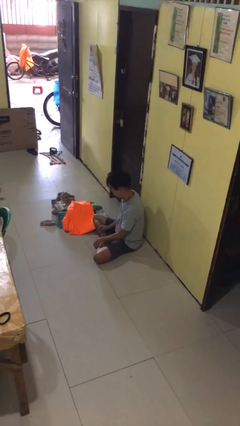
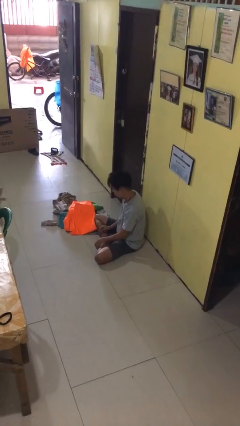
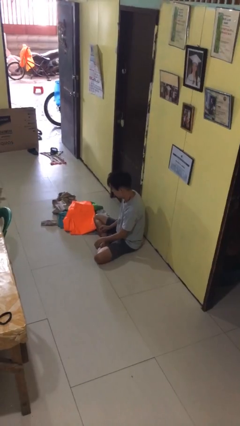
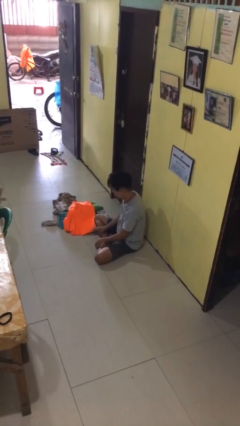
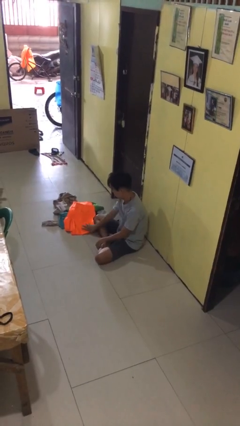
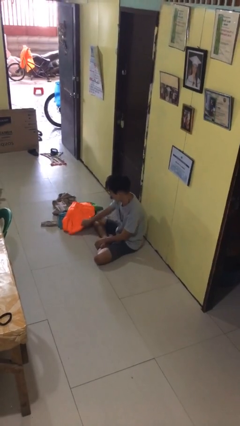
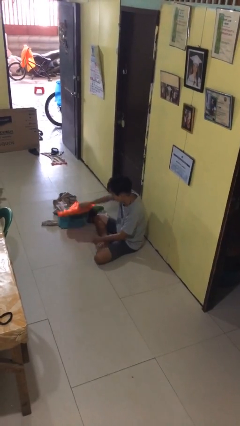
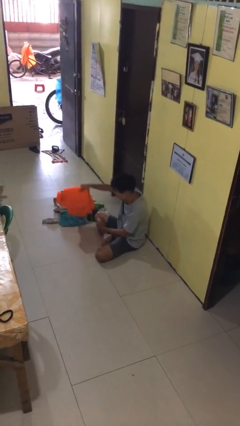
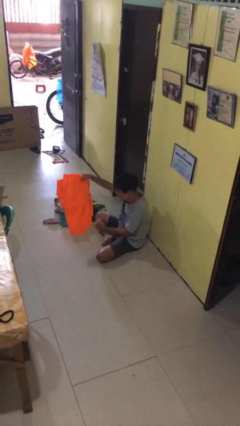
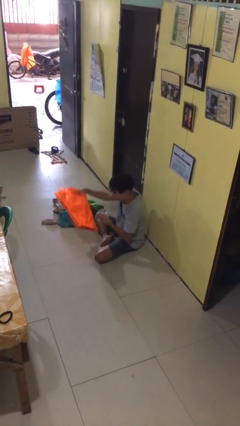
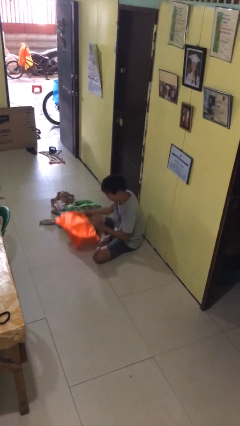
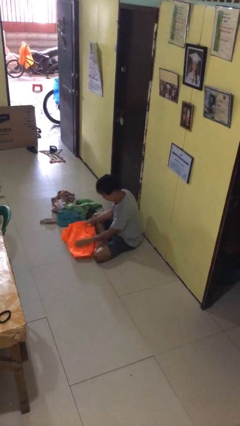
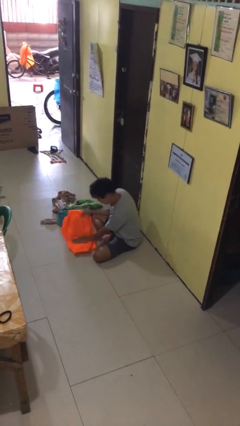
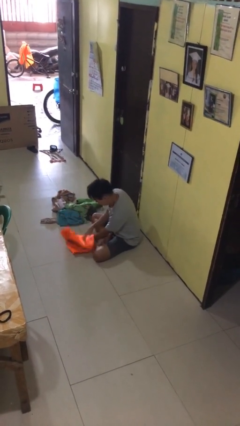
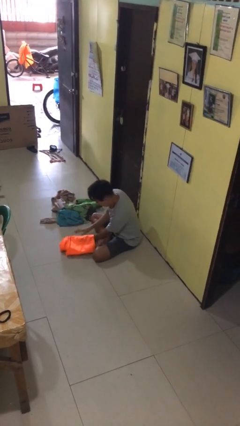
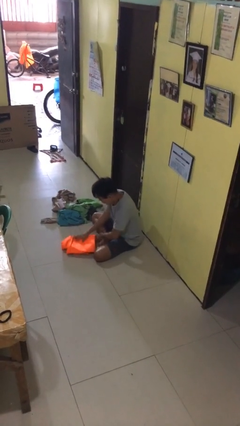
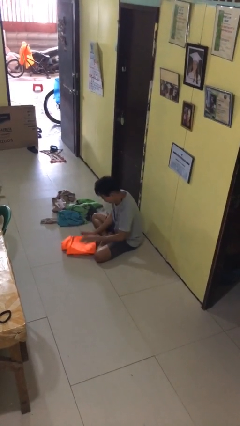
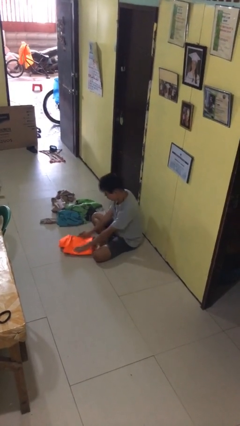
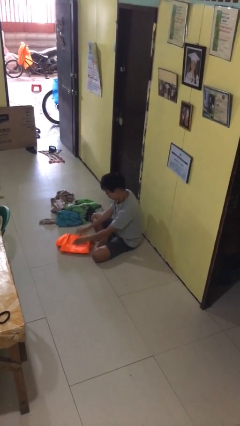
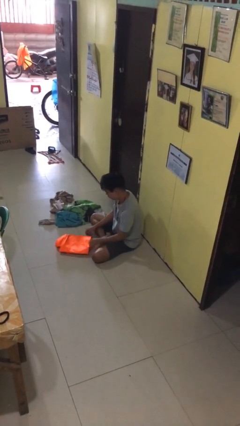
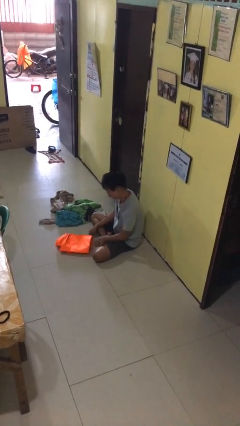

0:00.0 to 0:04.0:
person folds pants

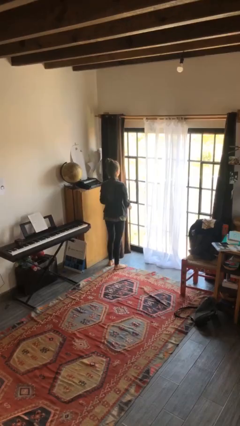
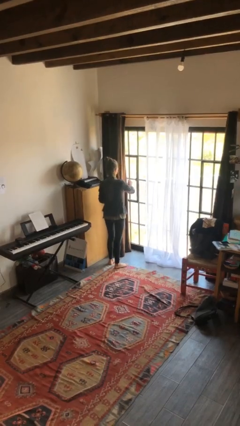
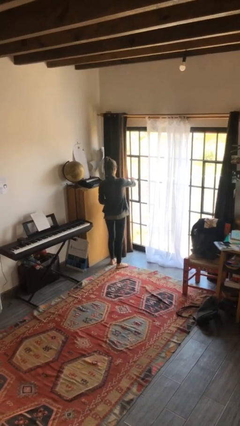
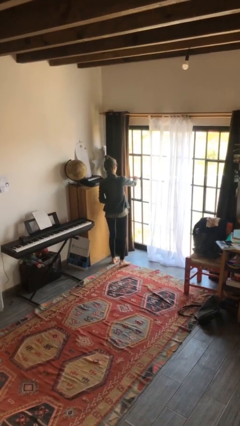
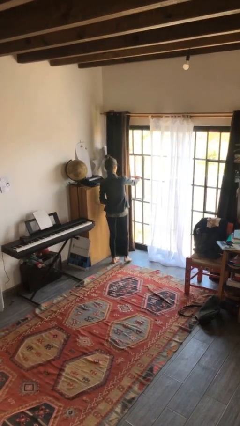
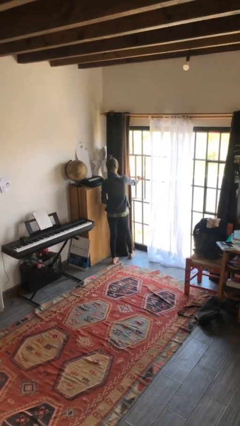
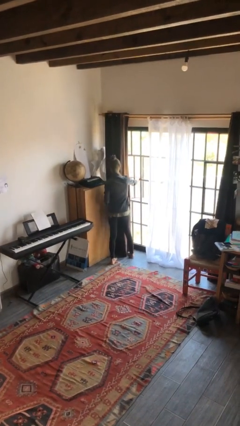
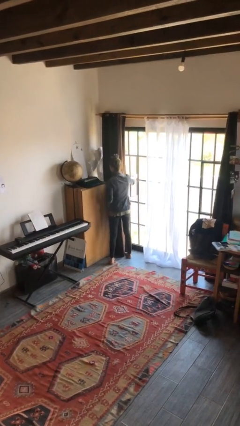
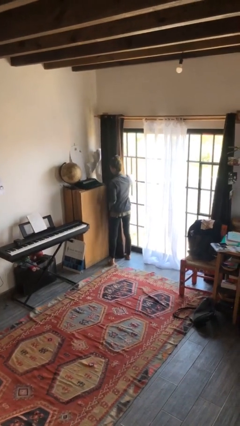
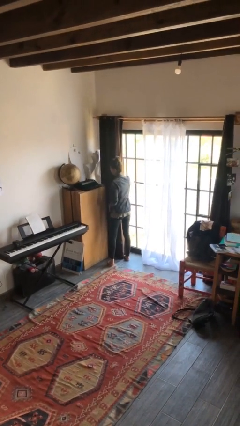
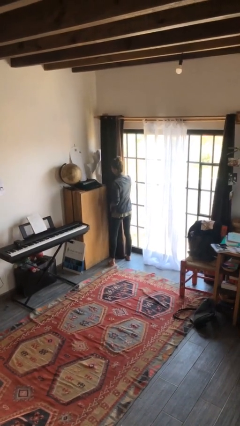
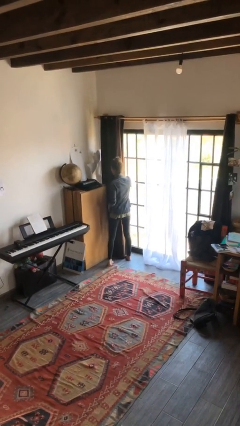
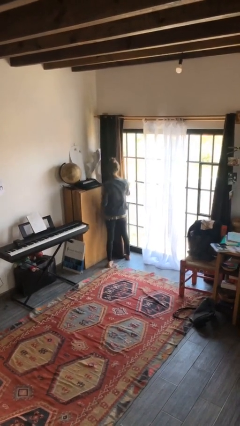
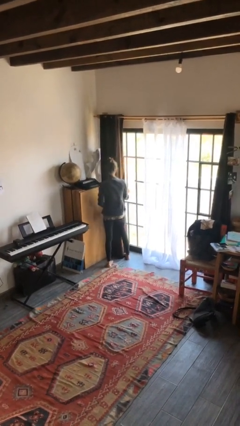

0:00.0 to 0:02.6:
person opens home window

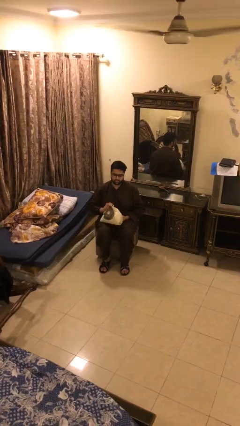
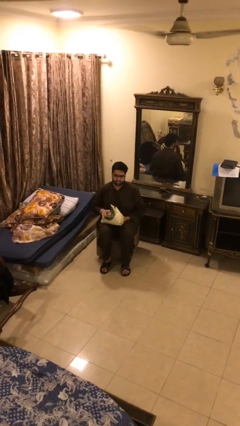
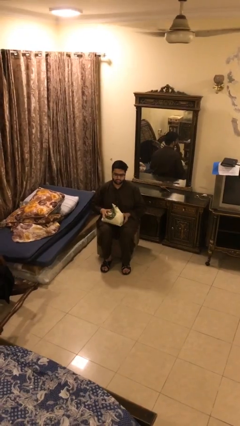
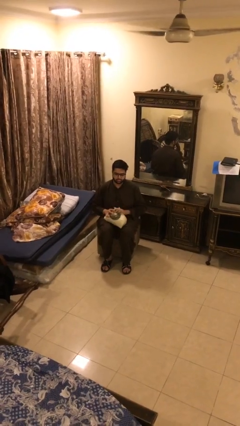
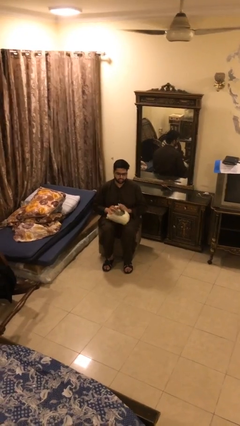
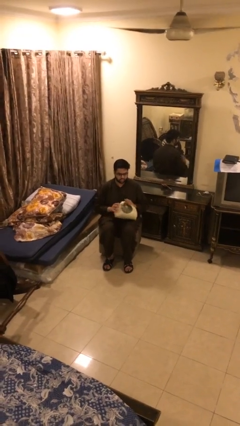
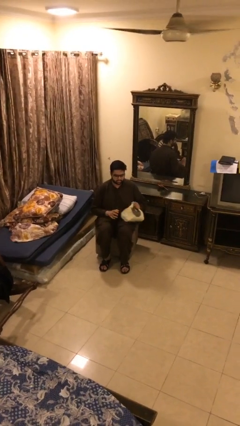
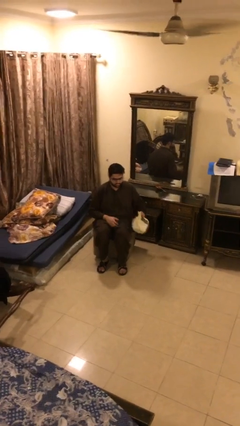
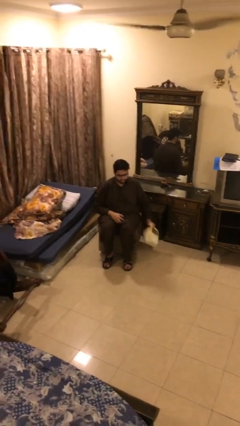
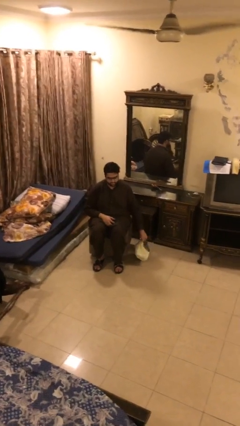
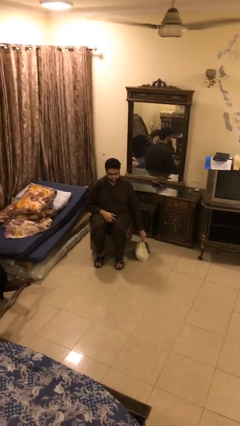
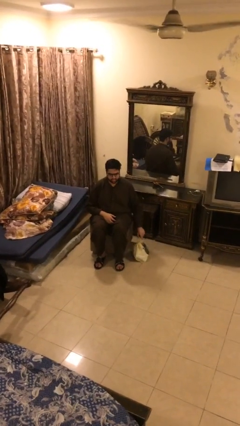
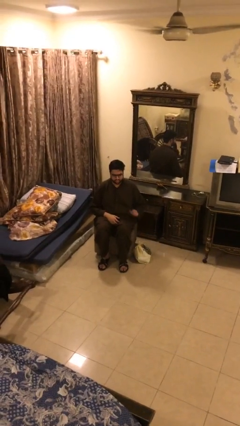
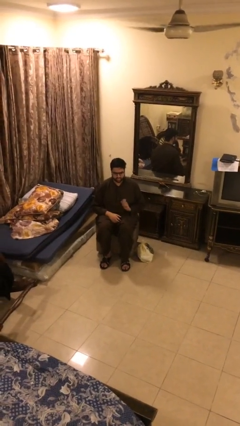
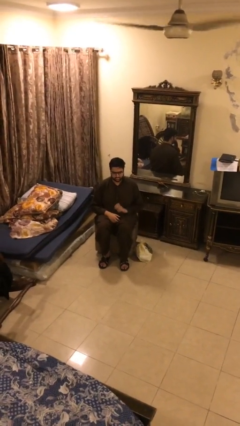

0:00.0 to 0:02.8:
person puts down object on floor

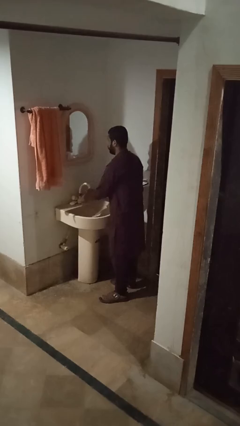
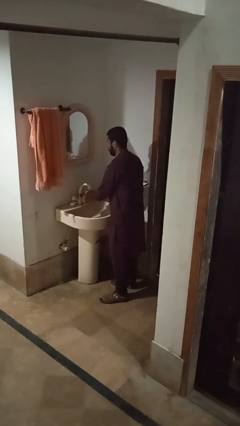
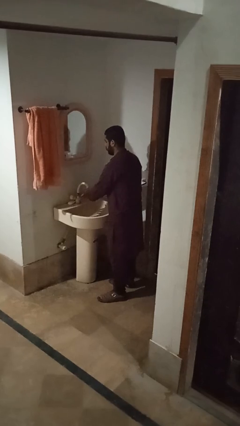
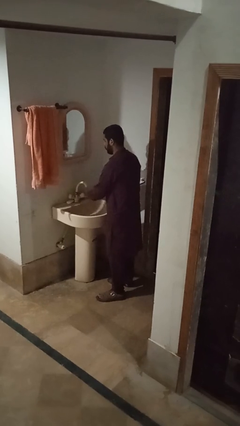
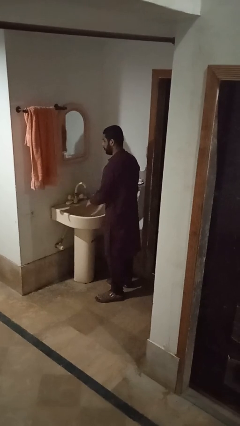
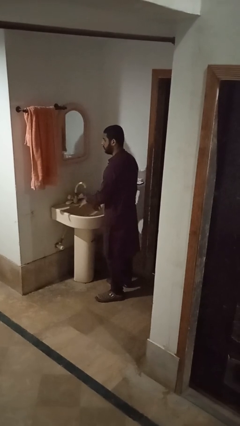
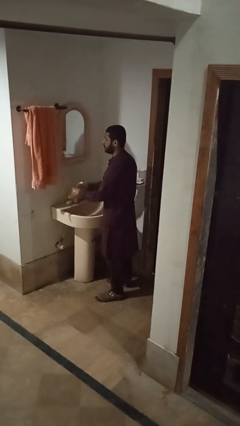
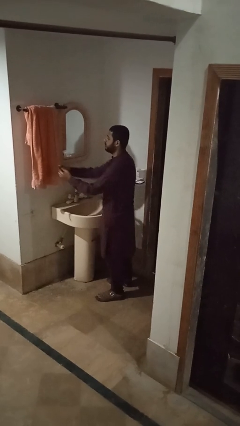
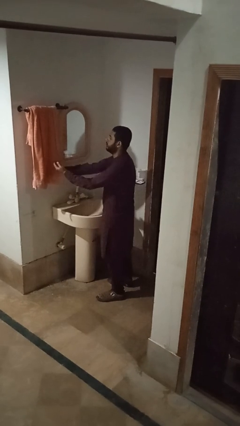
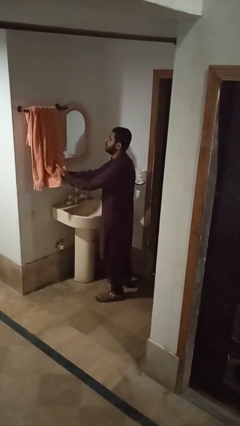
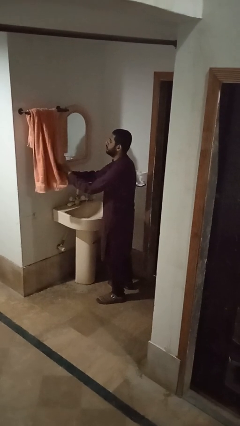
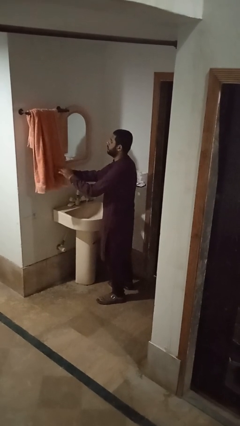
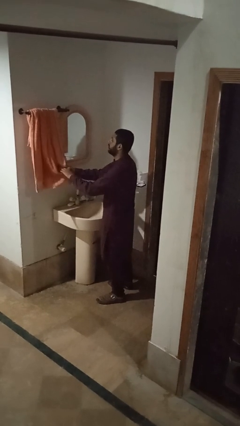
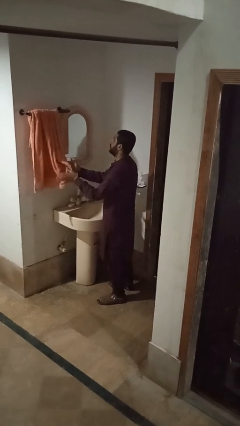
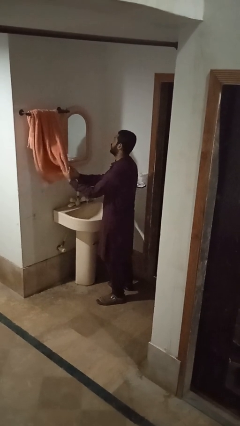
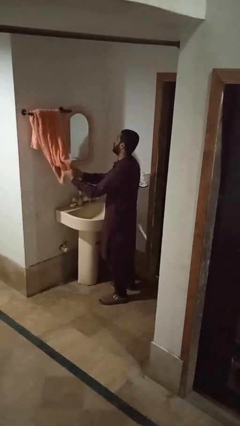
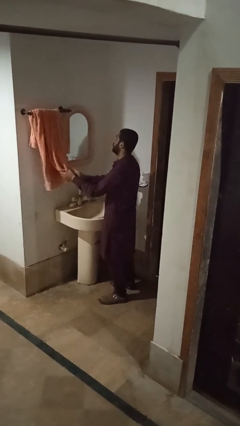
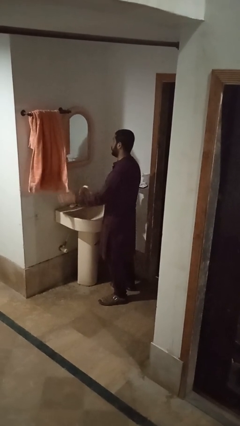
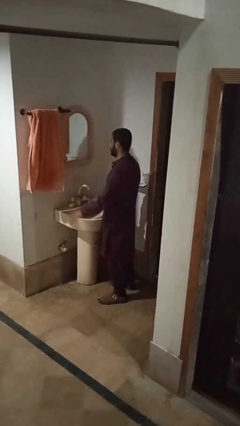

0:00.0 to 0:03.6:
person dries hands with towel

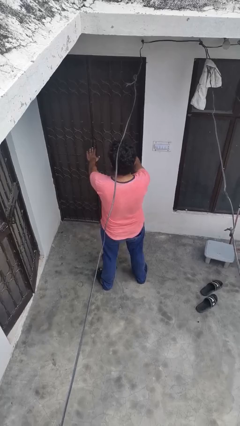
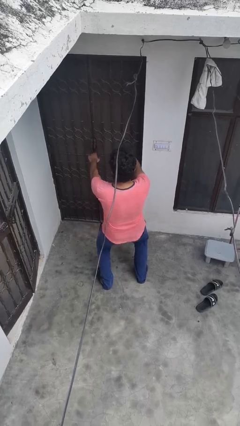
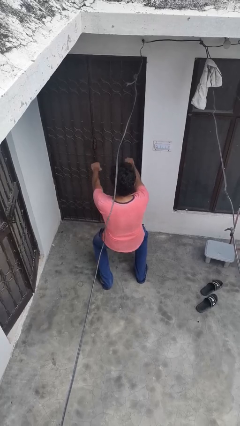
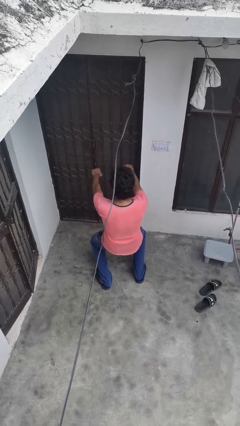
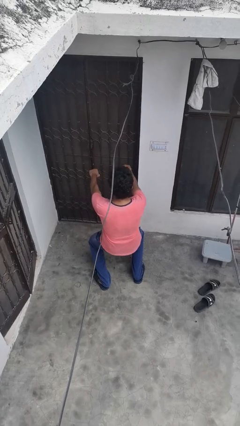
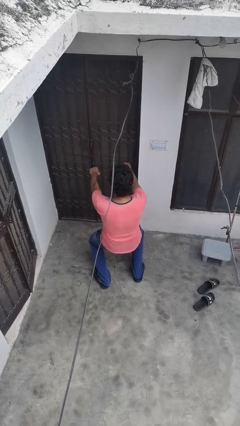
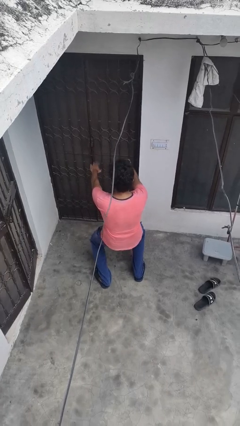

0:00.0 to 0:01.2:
person squats

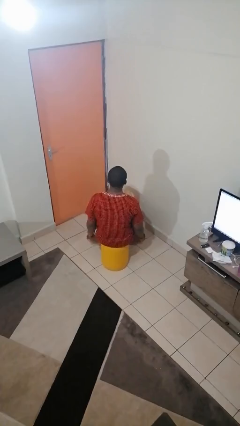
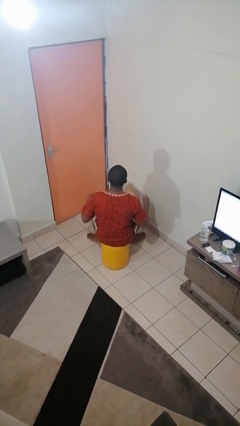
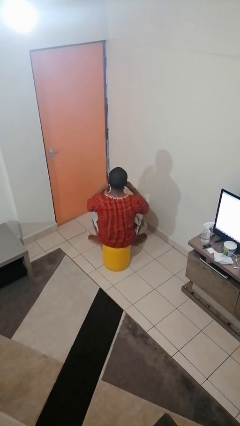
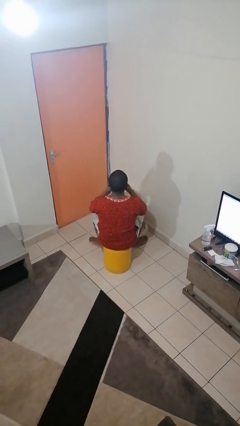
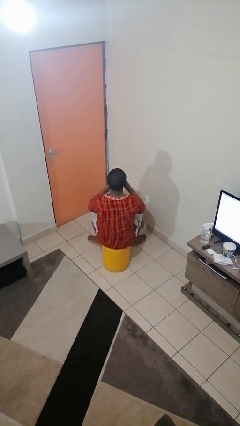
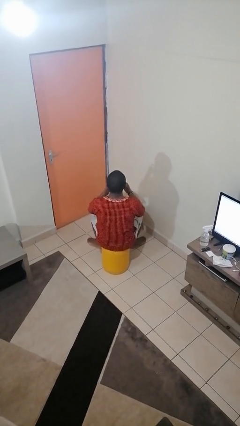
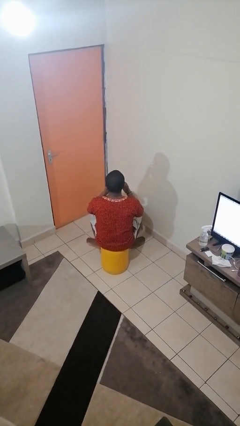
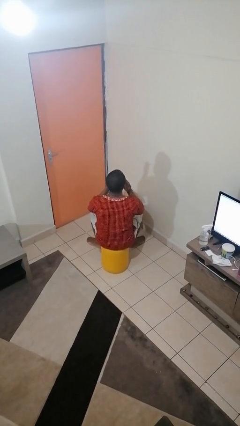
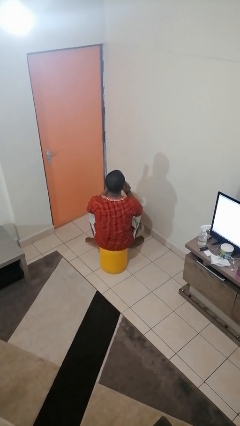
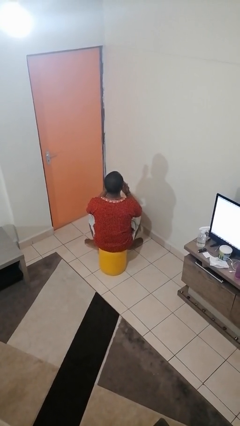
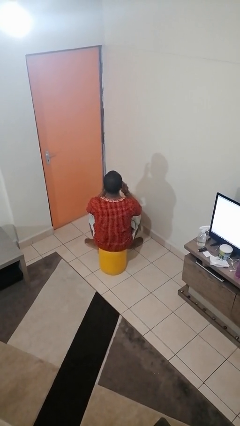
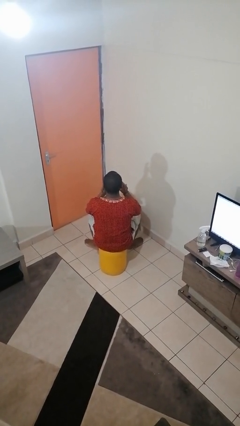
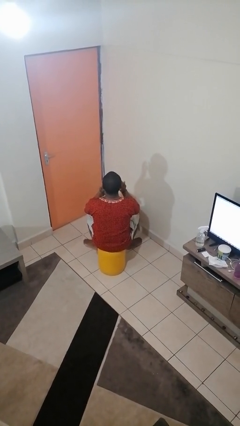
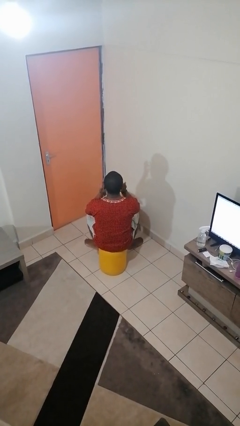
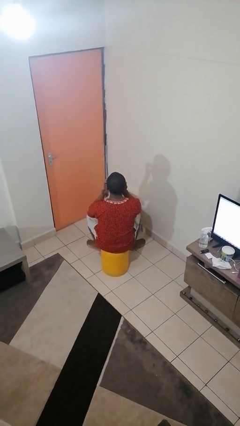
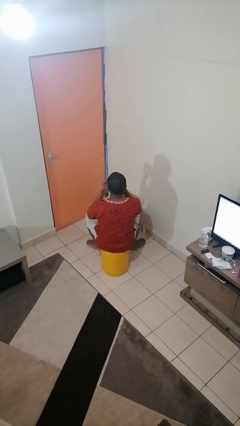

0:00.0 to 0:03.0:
person licks fingers

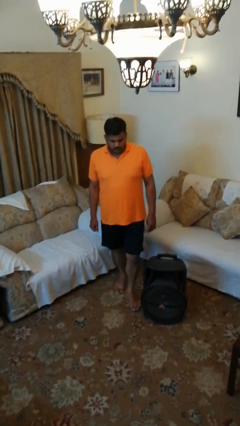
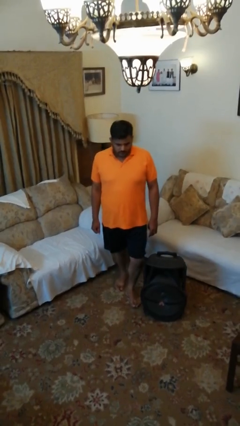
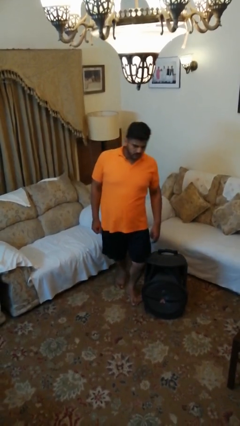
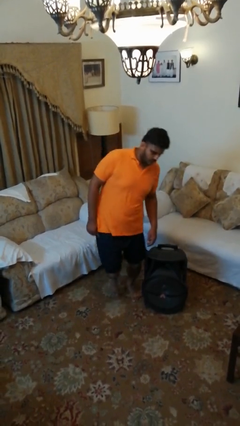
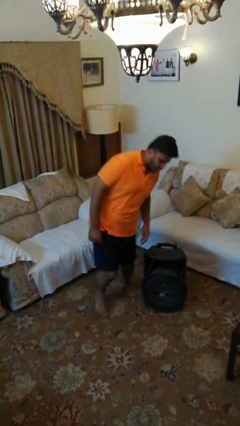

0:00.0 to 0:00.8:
person trips on object on floor
